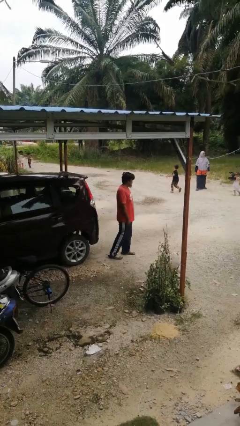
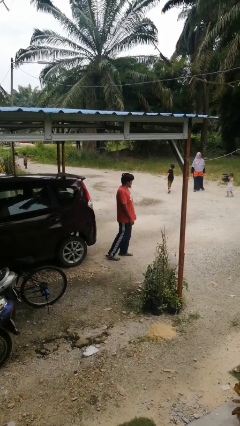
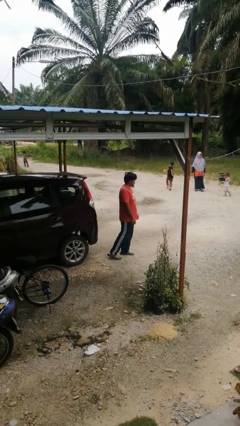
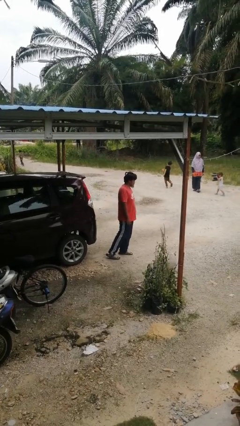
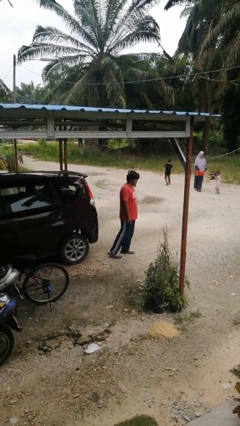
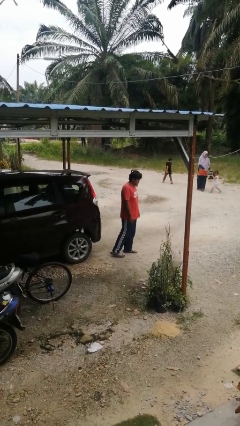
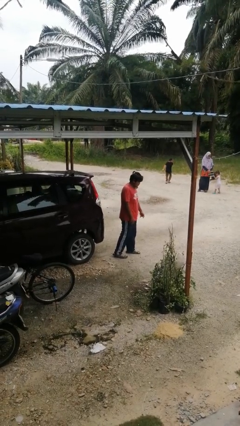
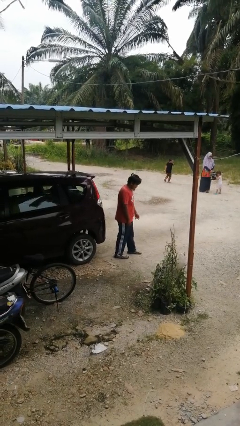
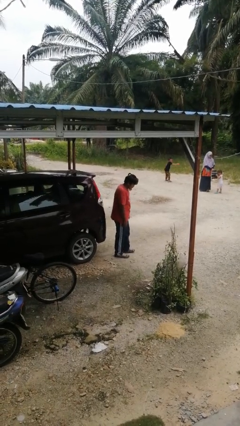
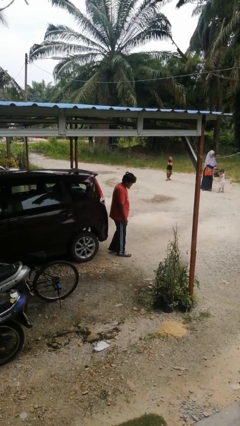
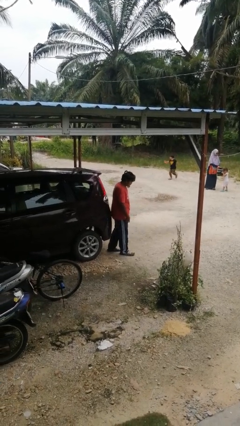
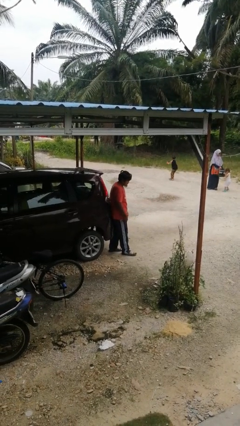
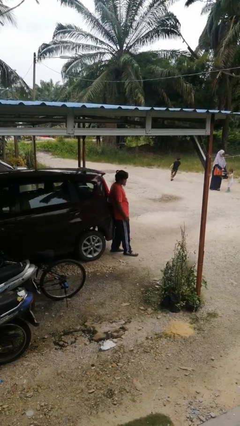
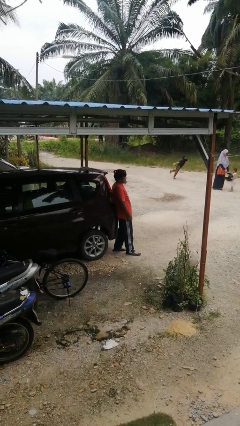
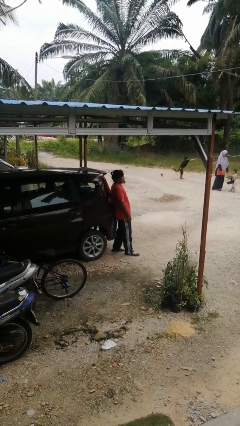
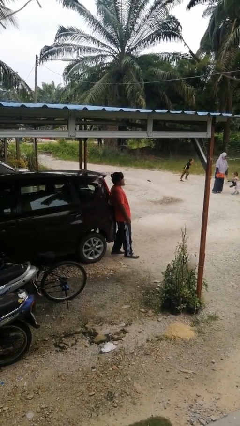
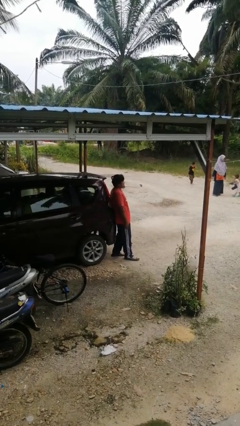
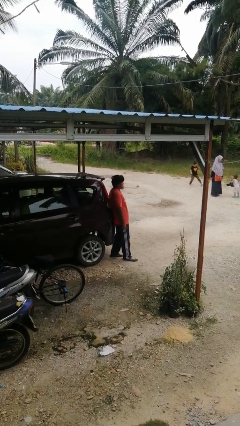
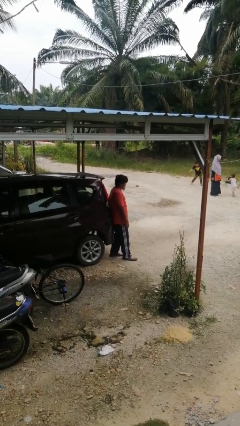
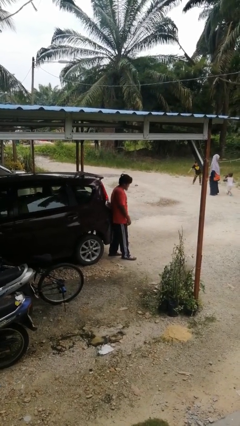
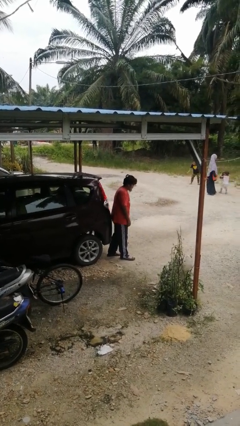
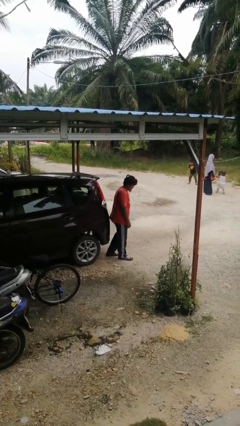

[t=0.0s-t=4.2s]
person leans against car

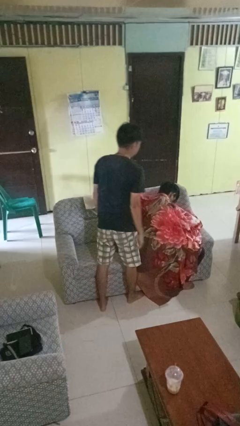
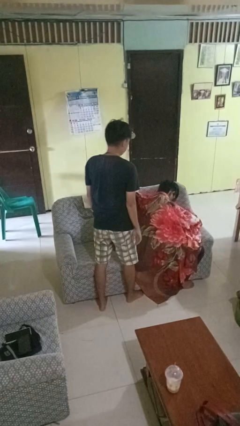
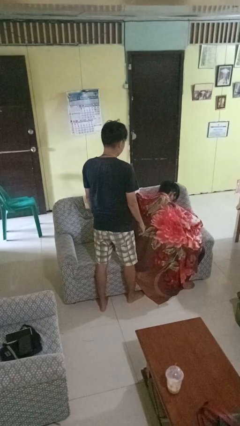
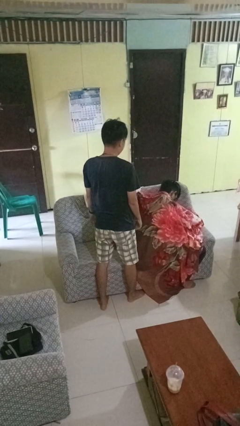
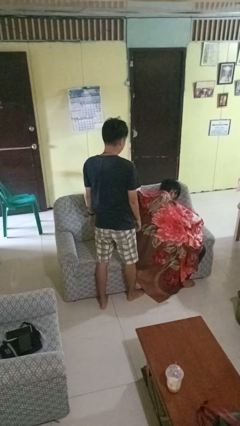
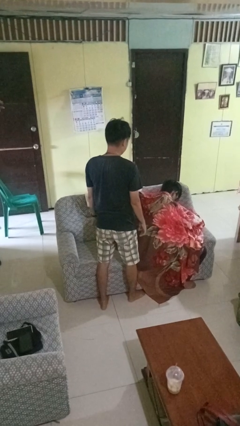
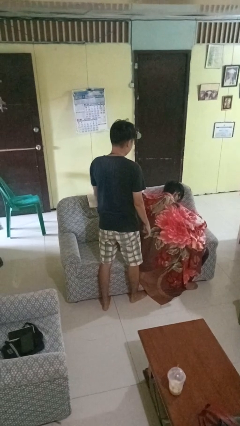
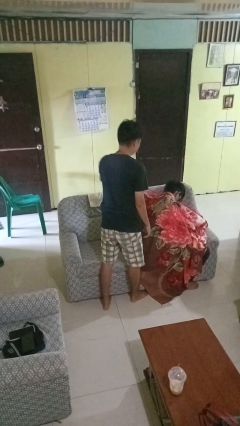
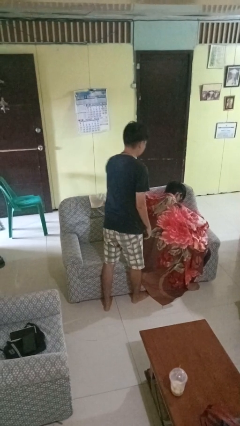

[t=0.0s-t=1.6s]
person covers friend with blanket

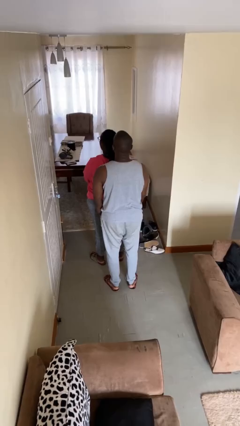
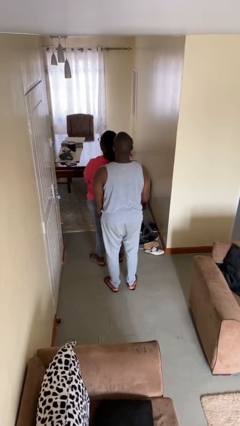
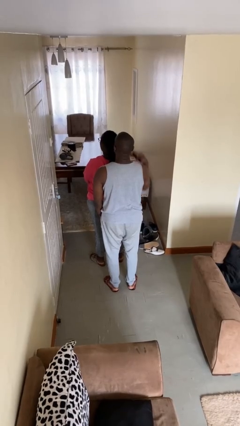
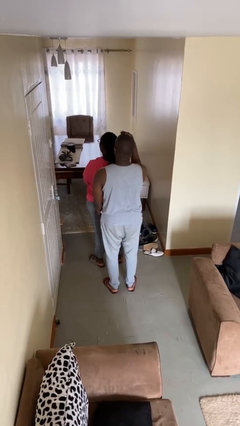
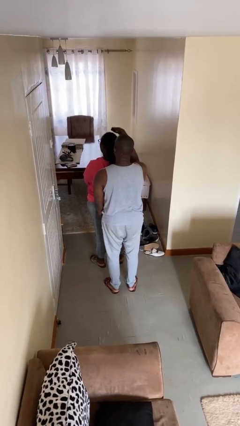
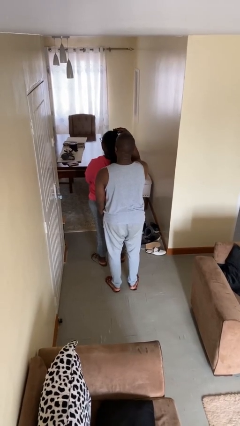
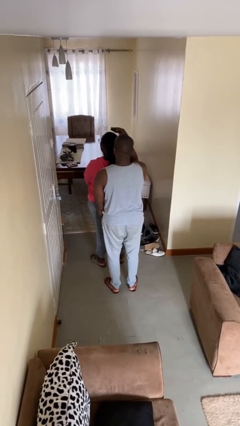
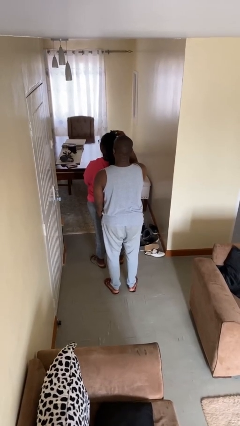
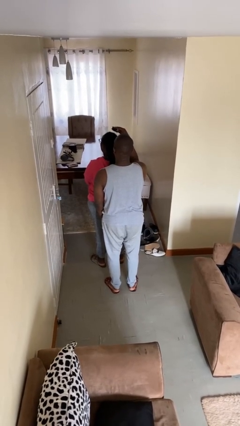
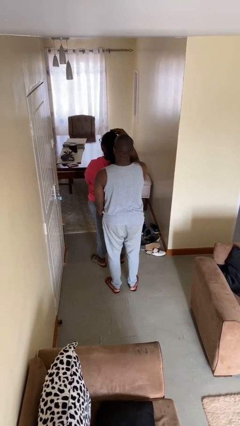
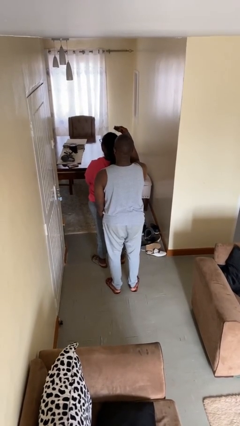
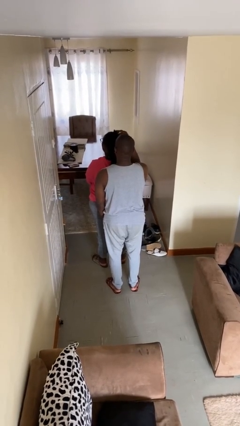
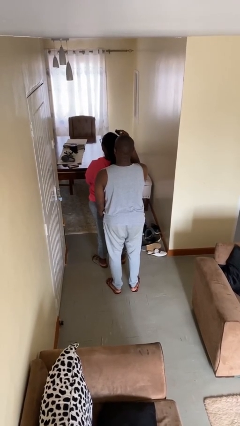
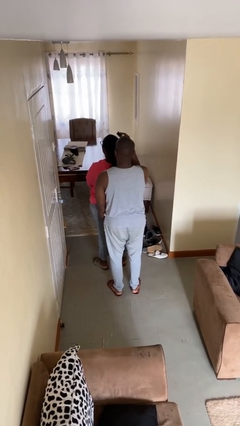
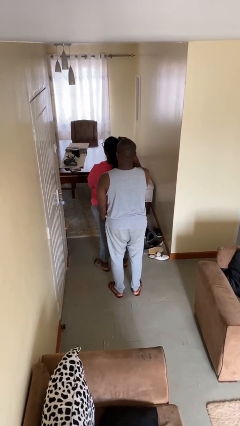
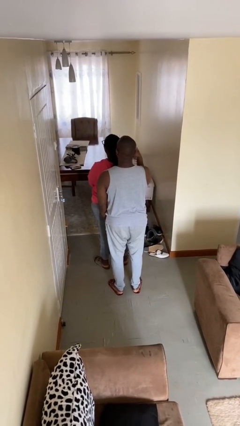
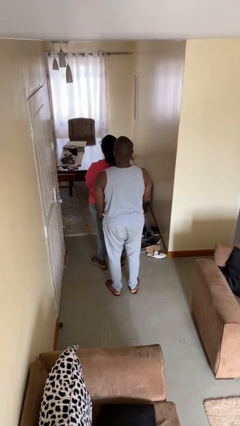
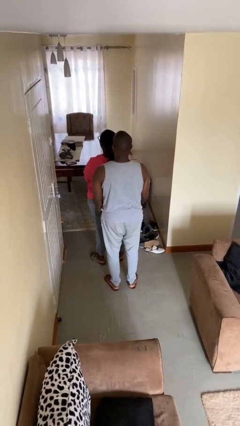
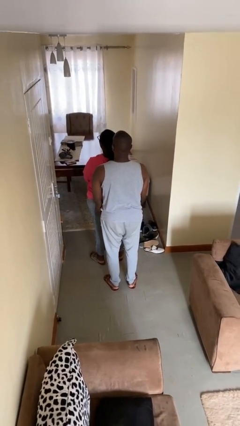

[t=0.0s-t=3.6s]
person brushes hair of person

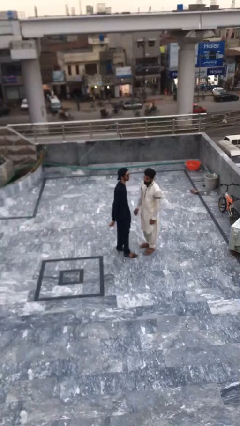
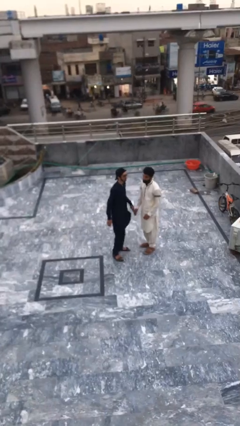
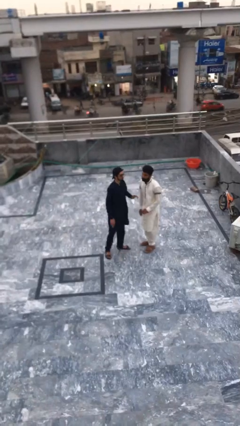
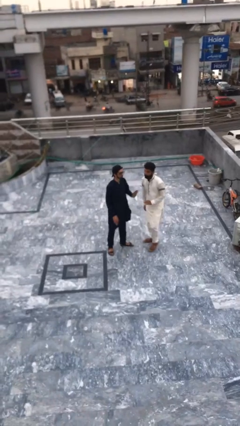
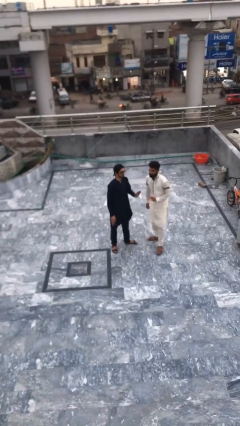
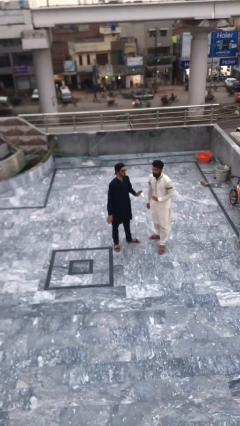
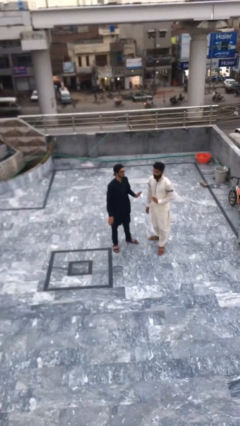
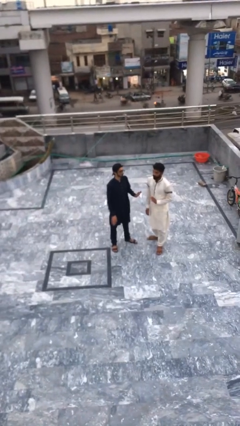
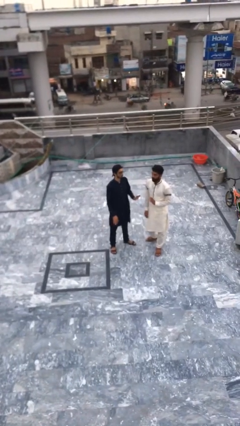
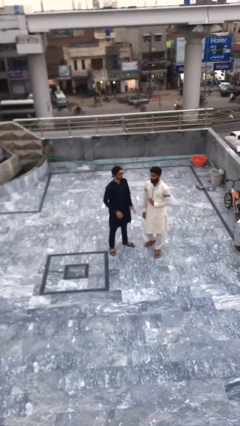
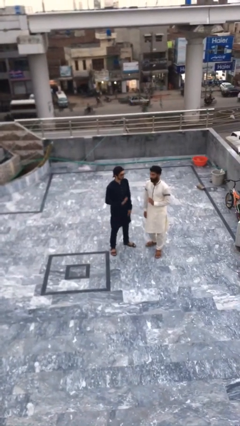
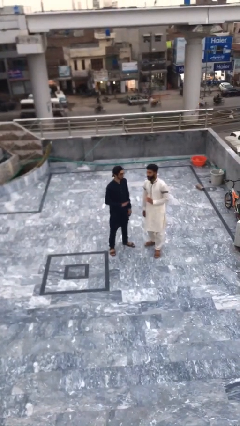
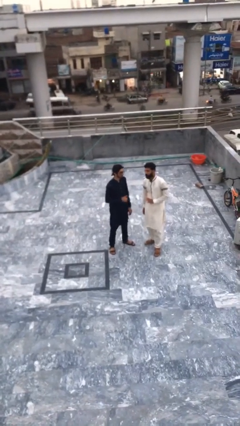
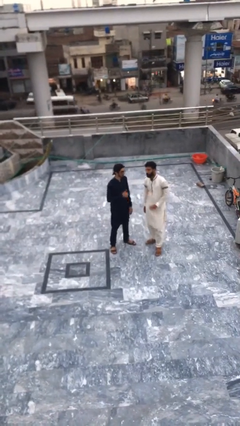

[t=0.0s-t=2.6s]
person talks to person

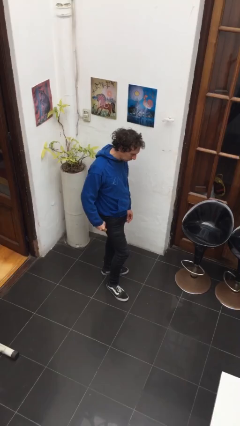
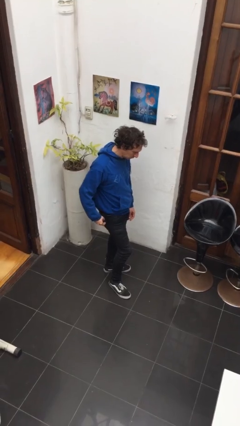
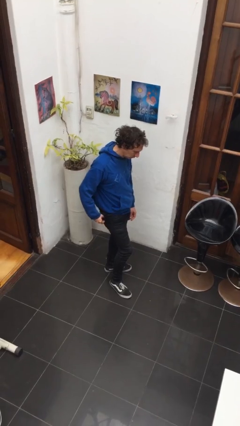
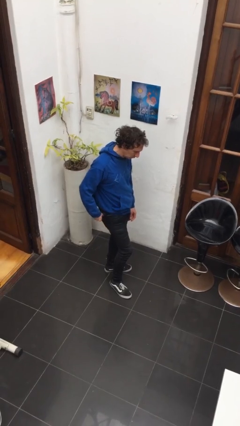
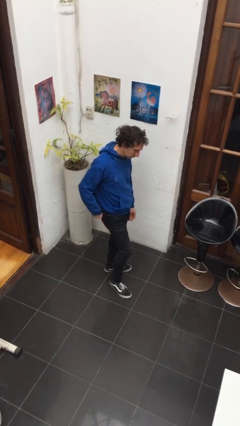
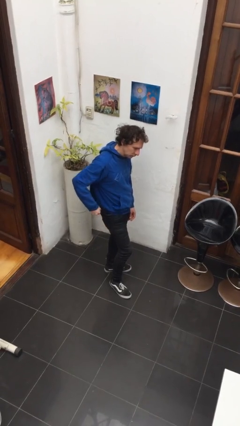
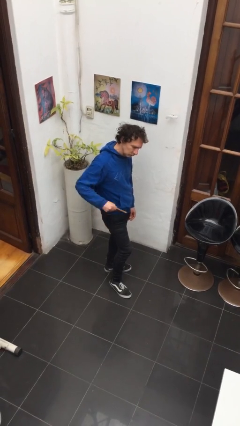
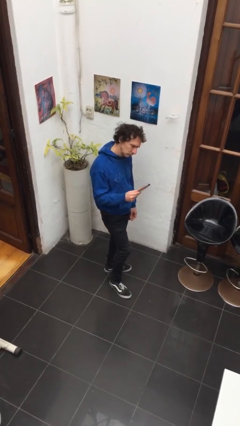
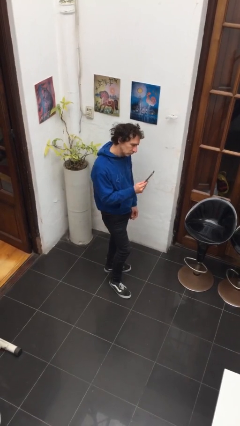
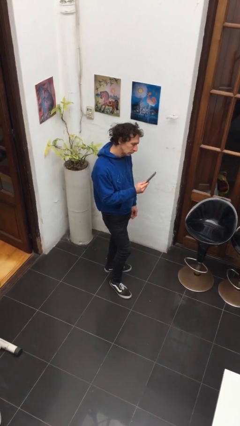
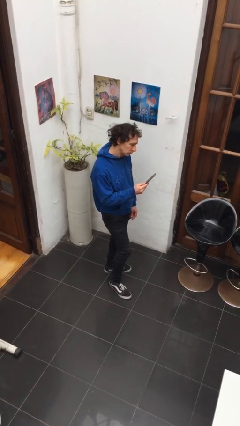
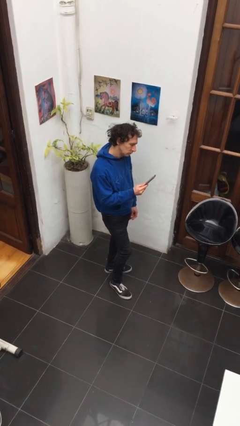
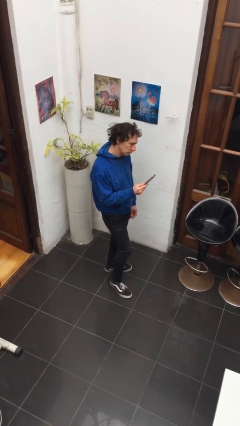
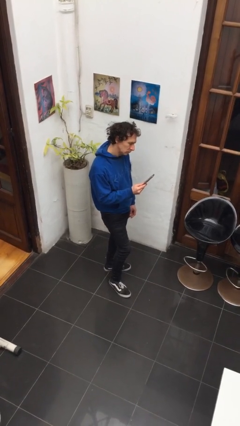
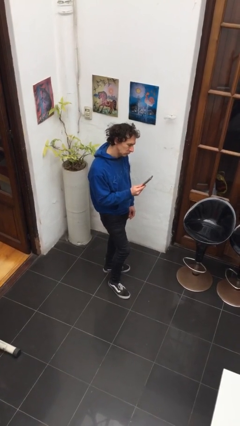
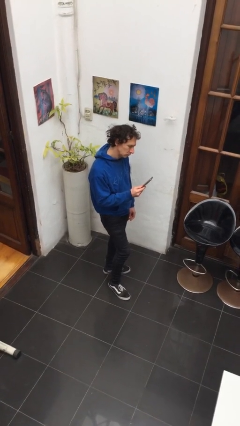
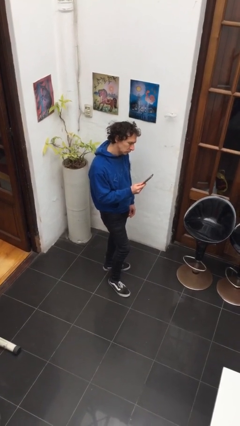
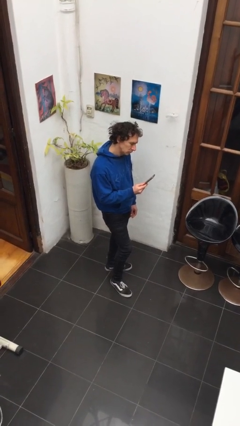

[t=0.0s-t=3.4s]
person takes phone from pocket

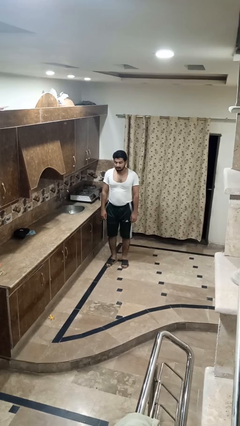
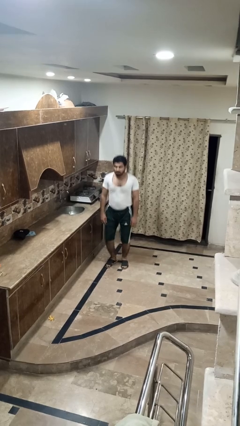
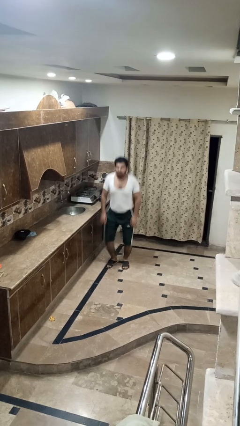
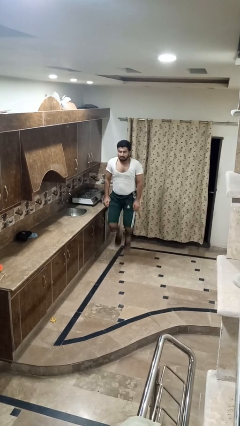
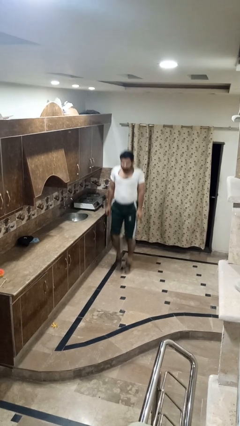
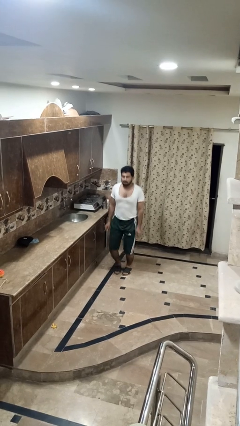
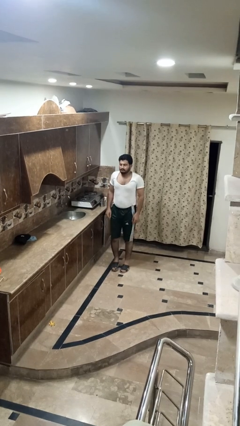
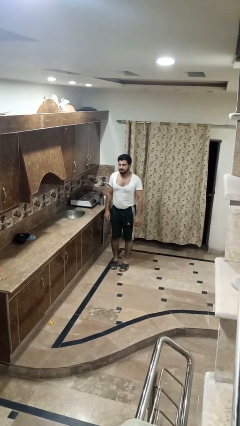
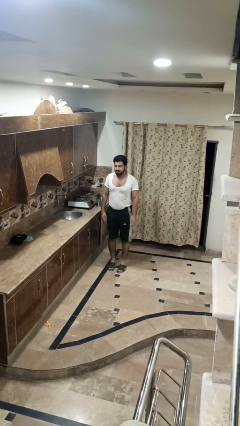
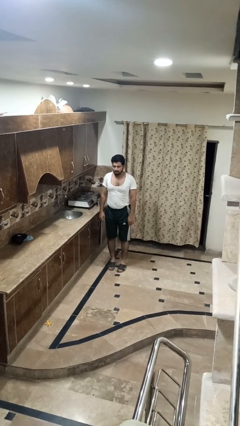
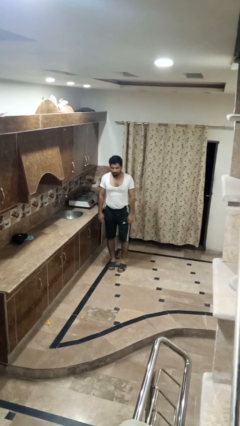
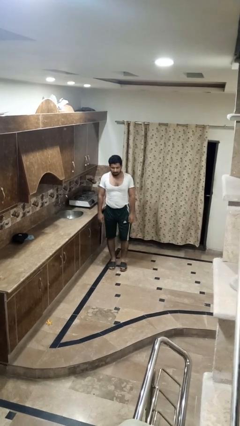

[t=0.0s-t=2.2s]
person jumps

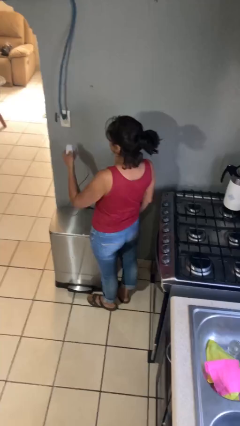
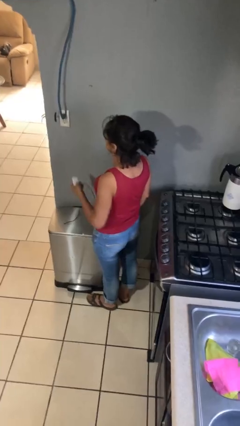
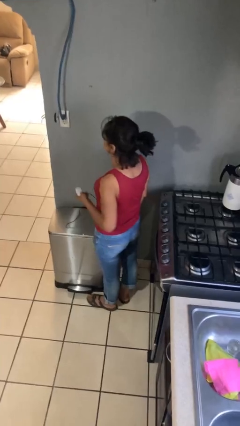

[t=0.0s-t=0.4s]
person unplugs from electrical socket
